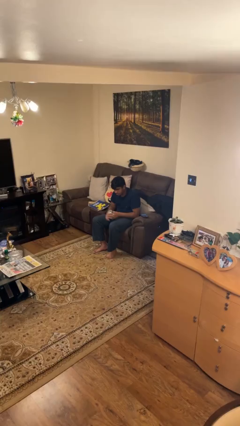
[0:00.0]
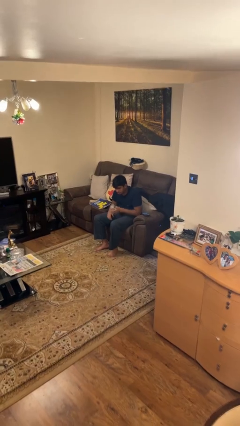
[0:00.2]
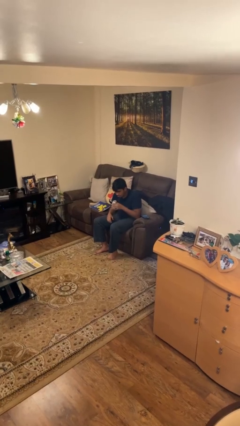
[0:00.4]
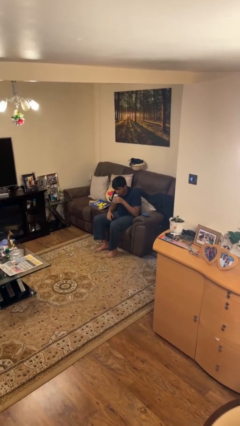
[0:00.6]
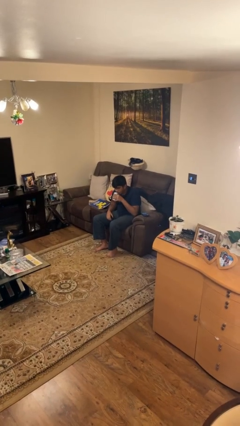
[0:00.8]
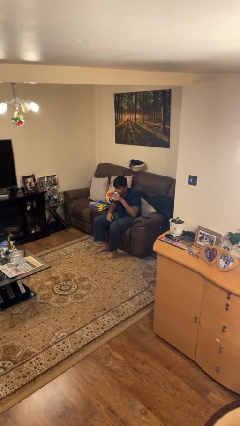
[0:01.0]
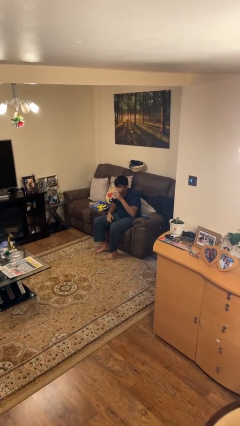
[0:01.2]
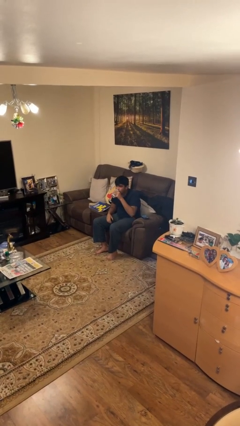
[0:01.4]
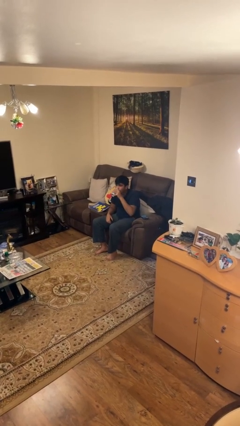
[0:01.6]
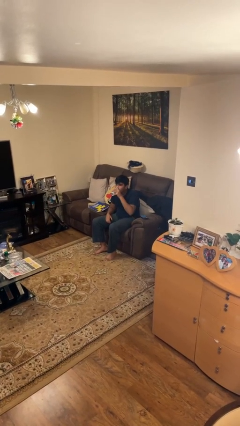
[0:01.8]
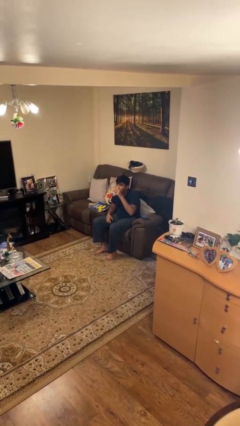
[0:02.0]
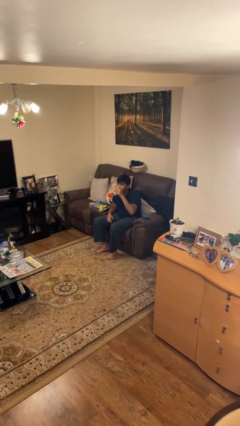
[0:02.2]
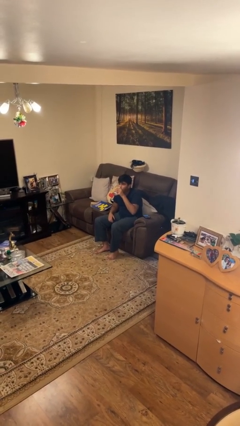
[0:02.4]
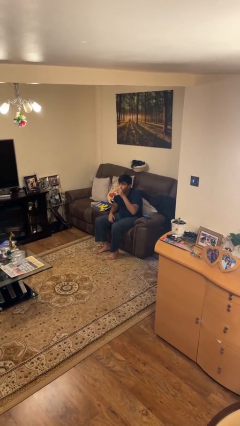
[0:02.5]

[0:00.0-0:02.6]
person drinks from beverage can

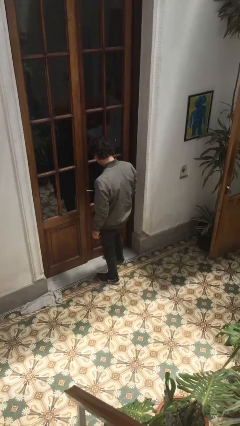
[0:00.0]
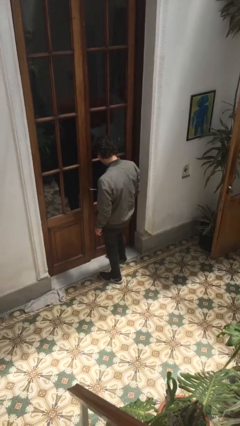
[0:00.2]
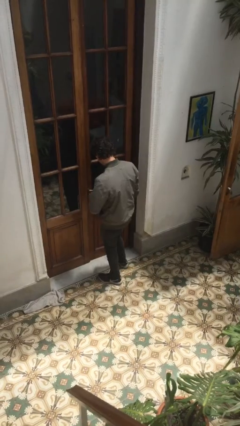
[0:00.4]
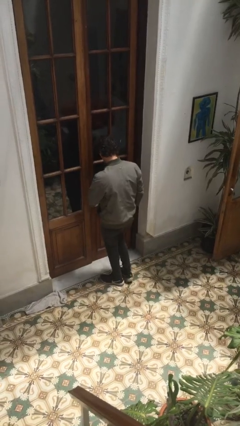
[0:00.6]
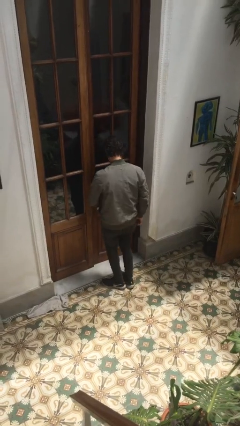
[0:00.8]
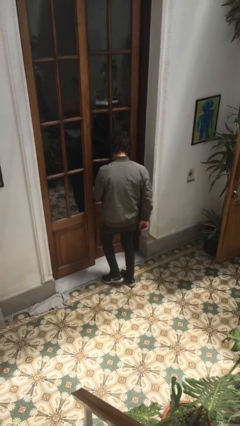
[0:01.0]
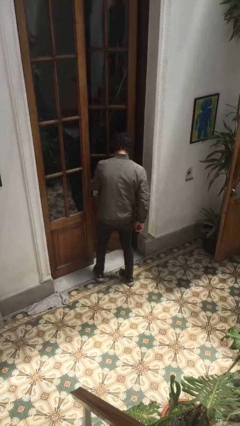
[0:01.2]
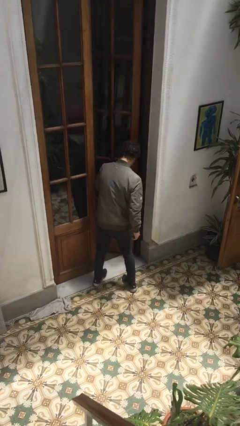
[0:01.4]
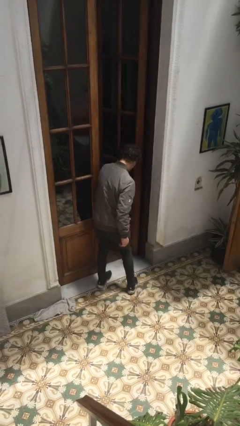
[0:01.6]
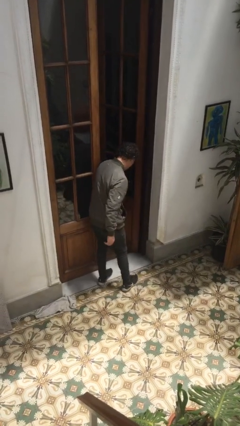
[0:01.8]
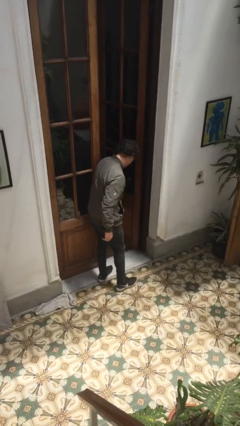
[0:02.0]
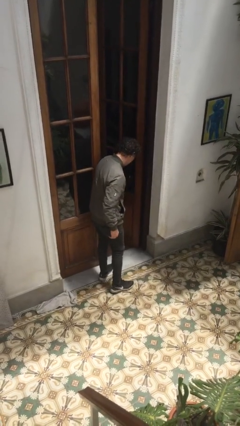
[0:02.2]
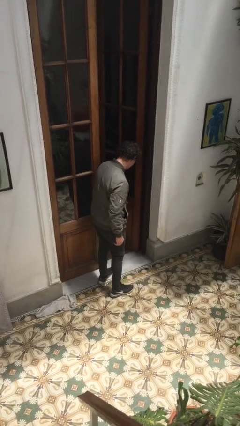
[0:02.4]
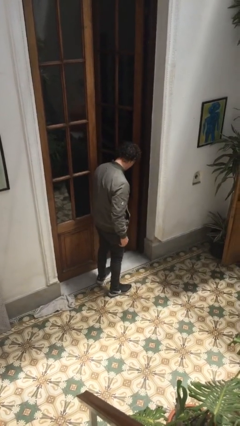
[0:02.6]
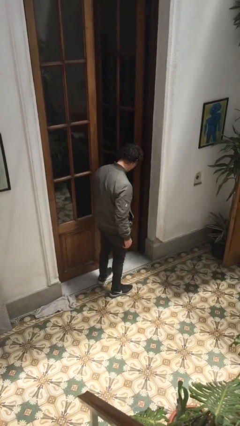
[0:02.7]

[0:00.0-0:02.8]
person opens facility door

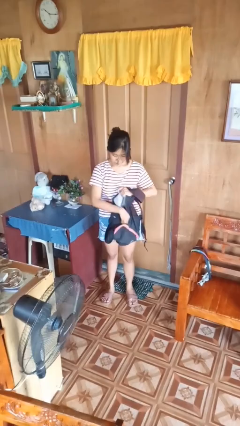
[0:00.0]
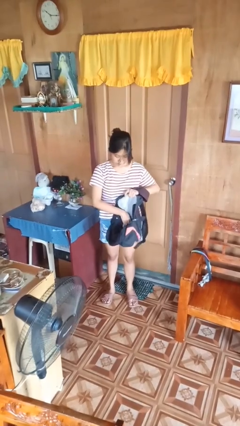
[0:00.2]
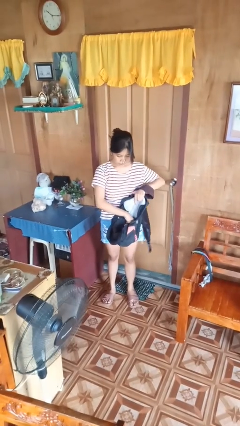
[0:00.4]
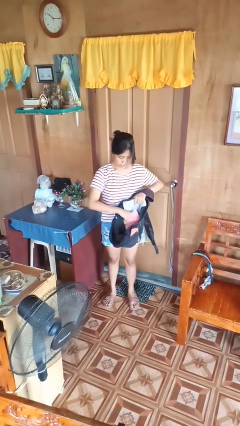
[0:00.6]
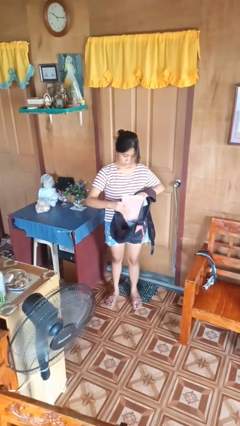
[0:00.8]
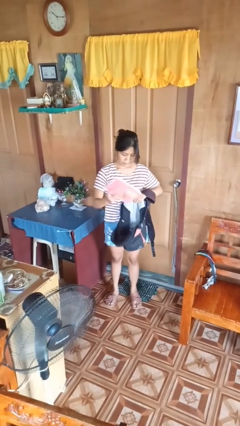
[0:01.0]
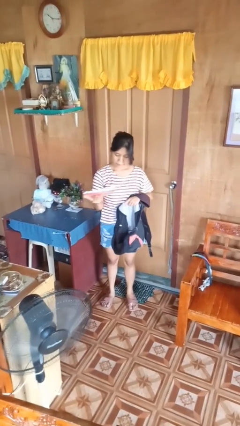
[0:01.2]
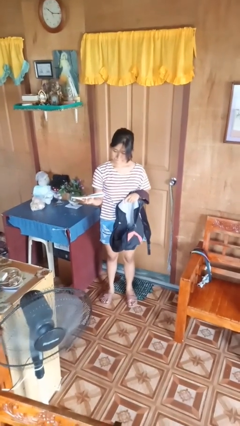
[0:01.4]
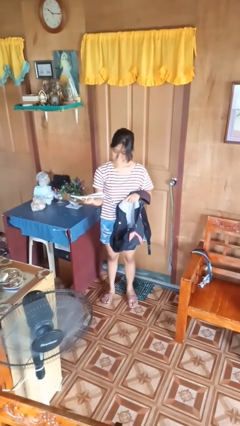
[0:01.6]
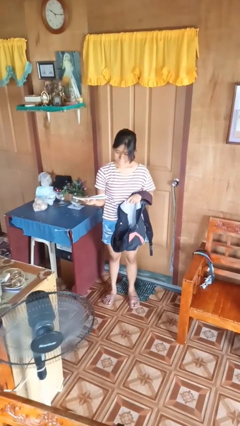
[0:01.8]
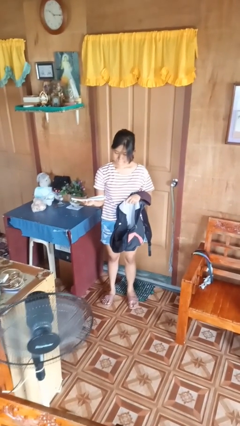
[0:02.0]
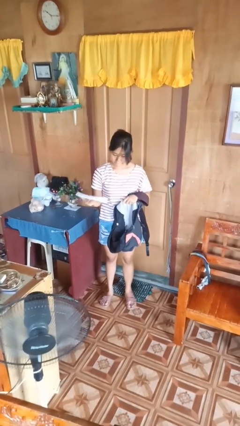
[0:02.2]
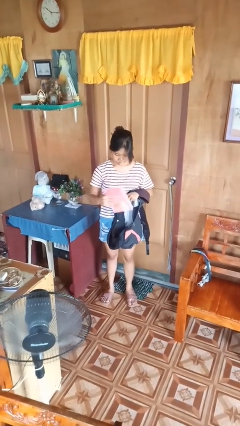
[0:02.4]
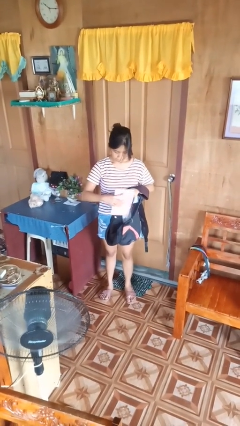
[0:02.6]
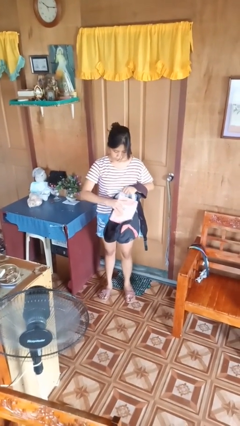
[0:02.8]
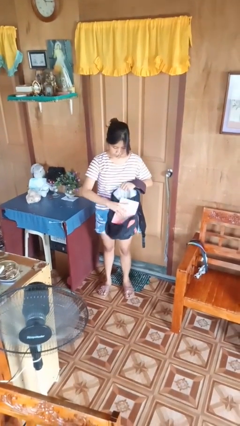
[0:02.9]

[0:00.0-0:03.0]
person takes object from backpack

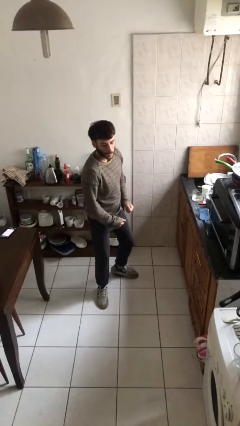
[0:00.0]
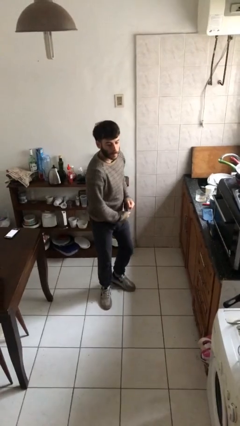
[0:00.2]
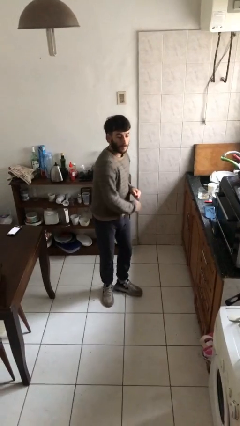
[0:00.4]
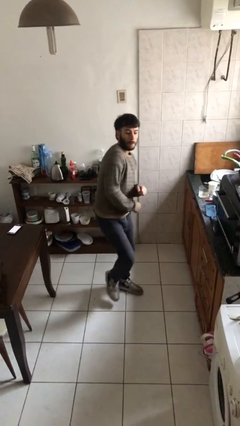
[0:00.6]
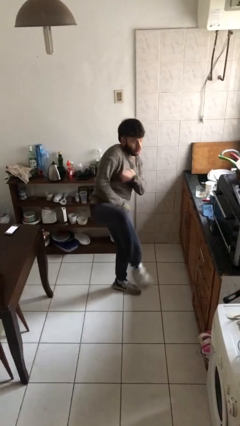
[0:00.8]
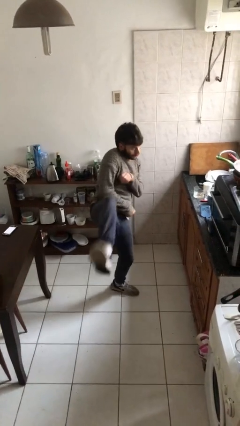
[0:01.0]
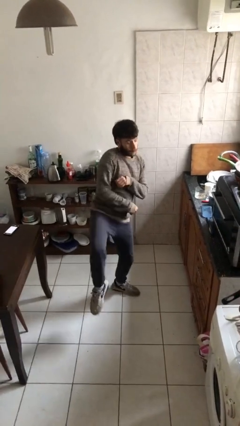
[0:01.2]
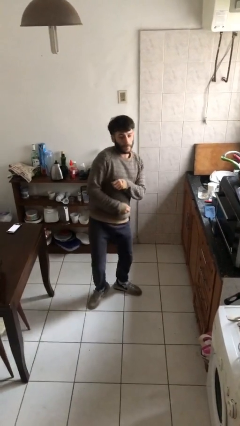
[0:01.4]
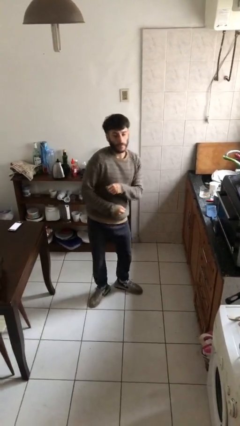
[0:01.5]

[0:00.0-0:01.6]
person karate kicks

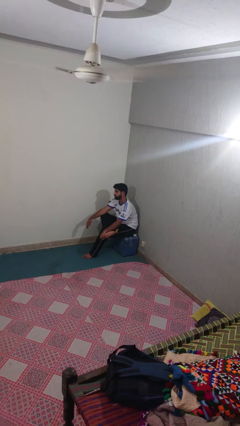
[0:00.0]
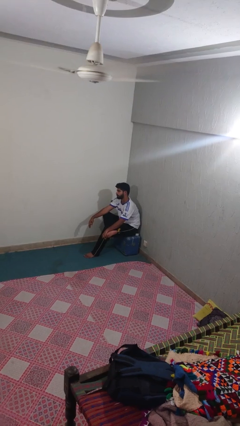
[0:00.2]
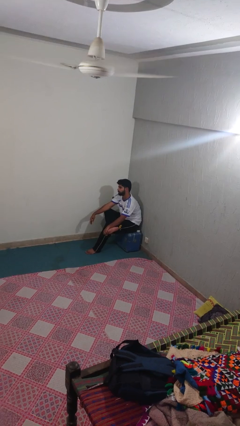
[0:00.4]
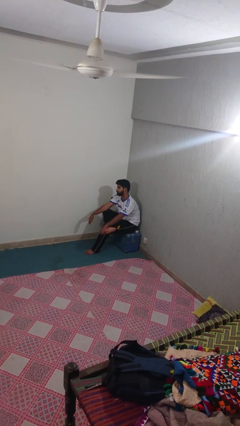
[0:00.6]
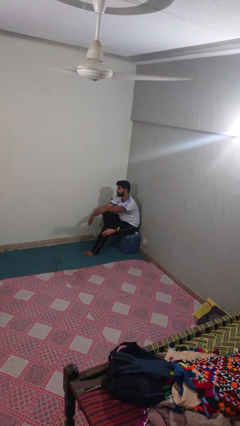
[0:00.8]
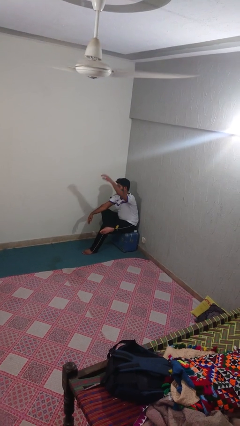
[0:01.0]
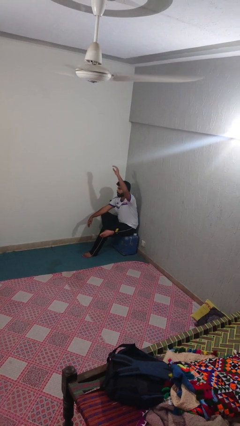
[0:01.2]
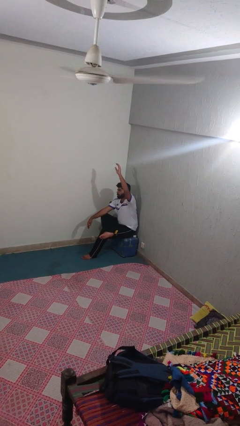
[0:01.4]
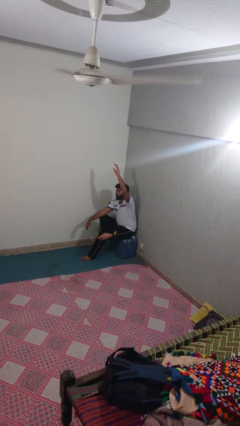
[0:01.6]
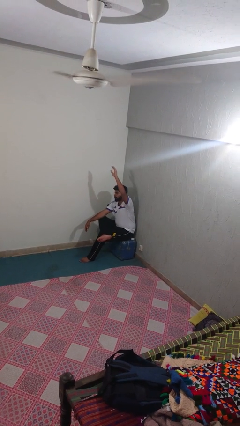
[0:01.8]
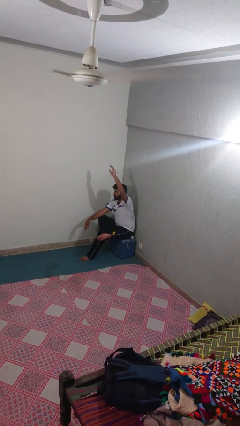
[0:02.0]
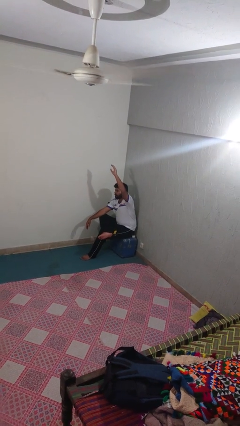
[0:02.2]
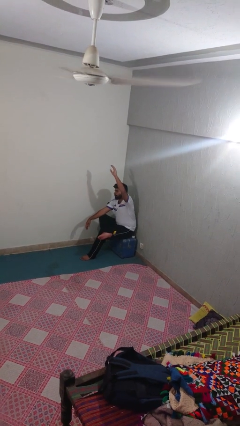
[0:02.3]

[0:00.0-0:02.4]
person gestures raise hand

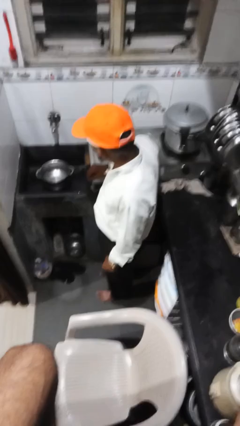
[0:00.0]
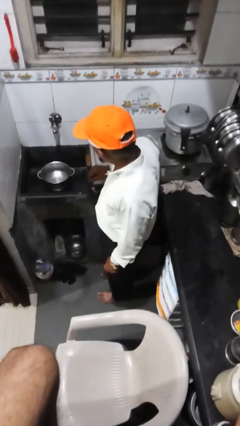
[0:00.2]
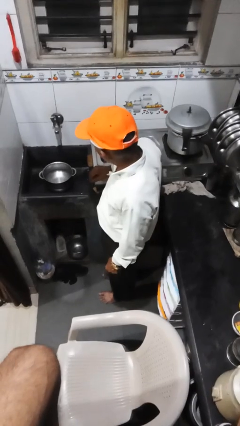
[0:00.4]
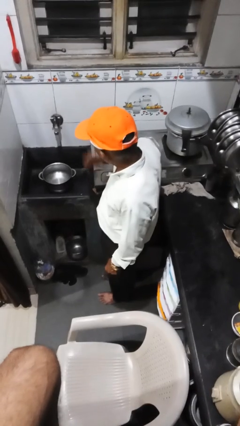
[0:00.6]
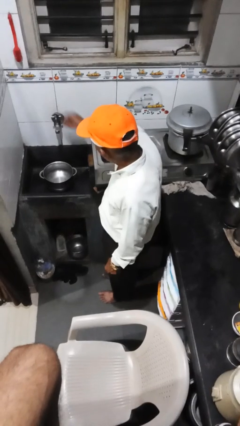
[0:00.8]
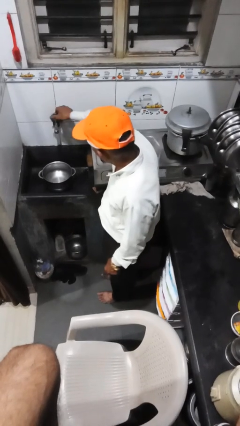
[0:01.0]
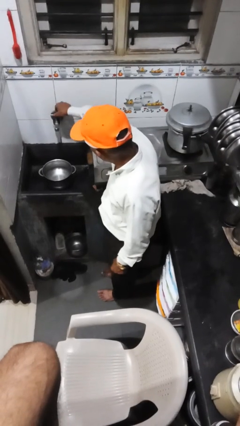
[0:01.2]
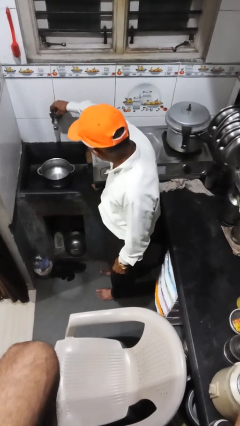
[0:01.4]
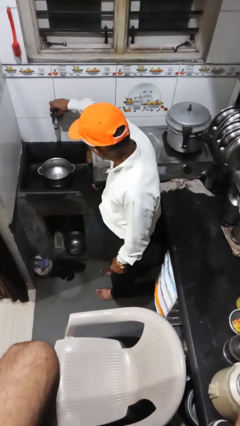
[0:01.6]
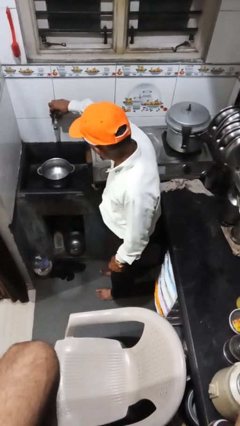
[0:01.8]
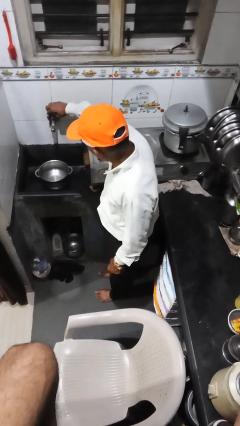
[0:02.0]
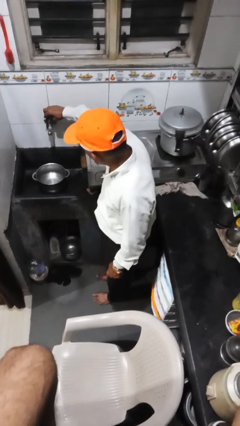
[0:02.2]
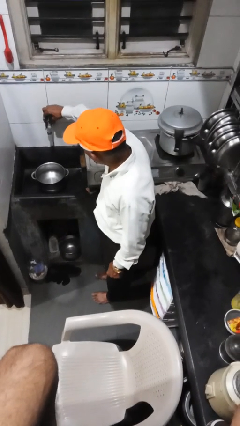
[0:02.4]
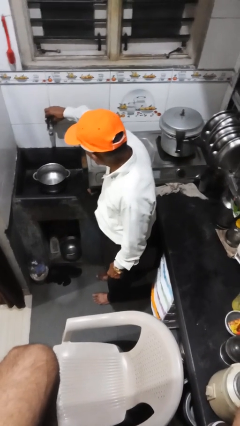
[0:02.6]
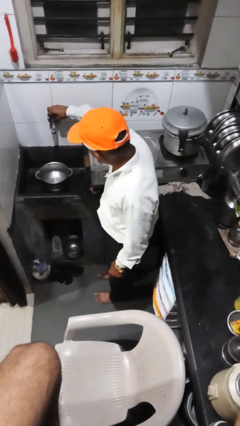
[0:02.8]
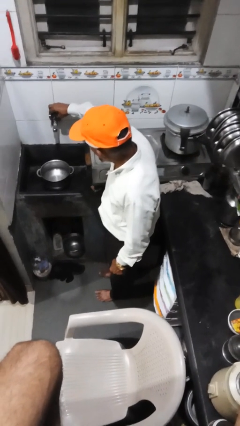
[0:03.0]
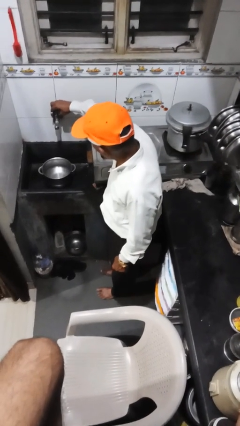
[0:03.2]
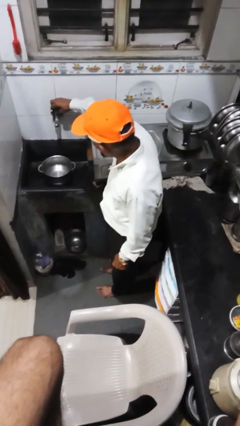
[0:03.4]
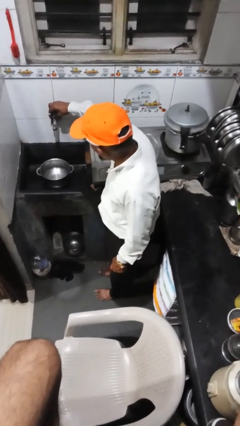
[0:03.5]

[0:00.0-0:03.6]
person turns on faucet

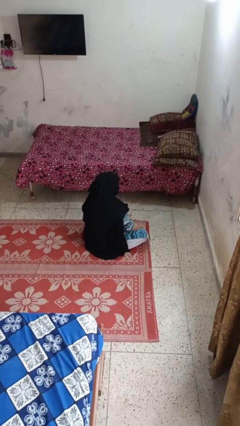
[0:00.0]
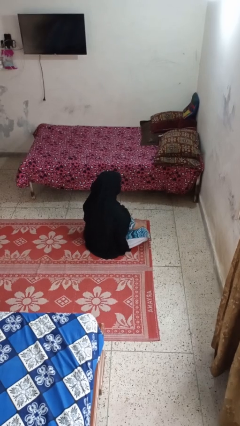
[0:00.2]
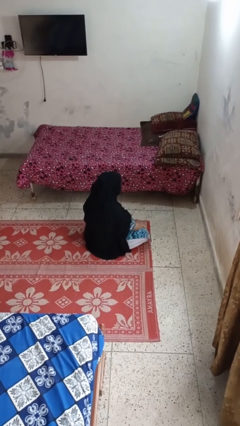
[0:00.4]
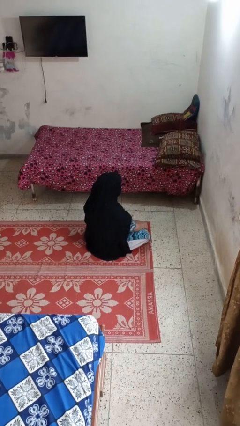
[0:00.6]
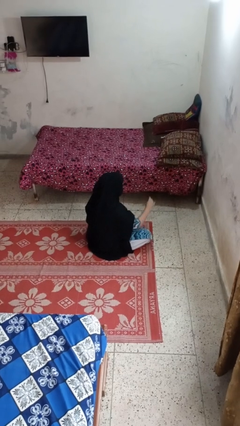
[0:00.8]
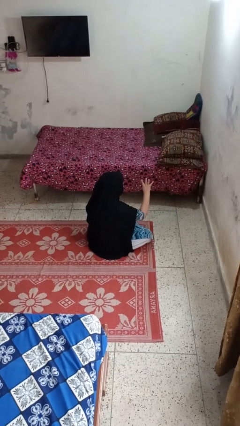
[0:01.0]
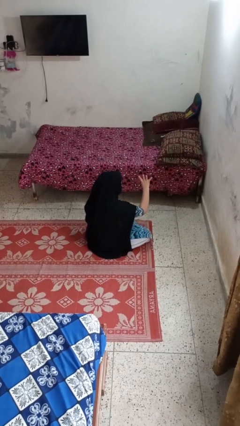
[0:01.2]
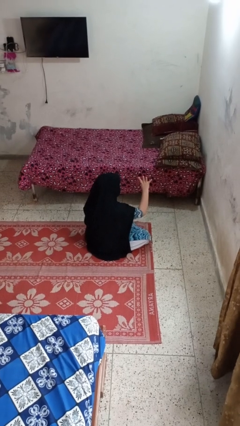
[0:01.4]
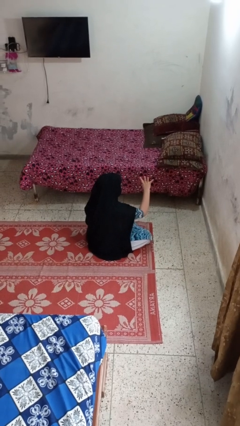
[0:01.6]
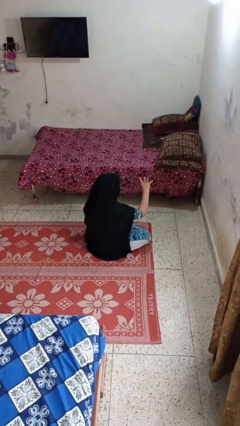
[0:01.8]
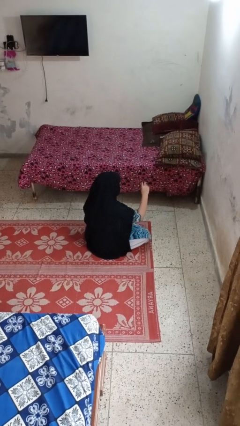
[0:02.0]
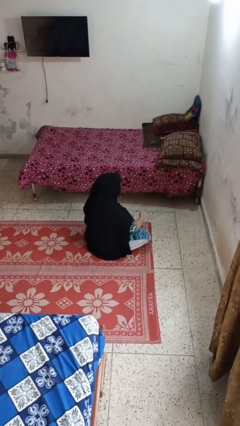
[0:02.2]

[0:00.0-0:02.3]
person gestures number four
